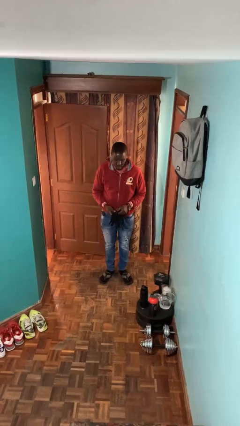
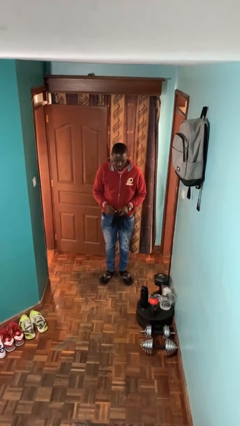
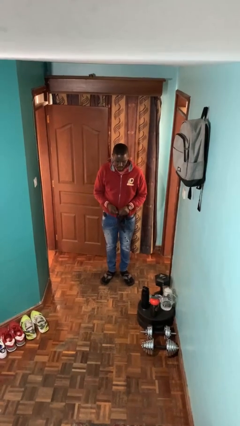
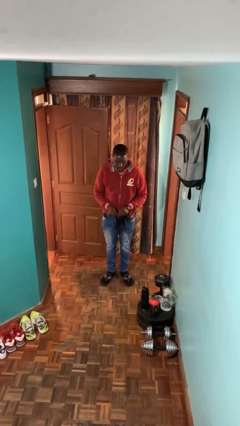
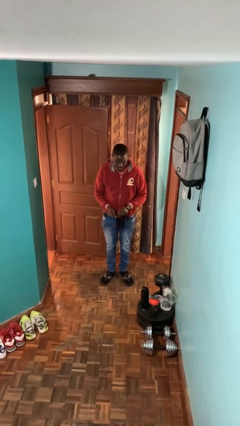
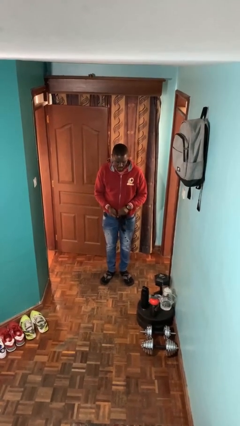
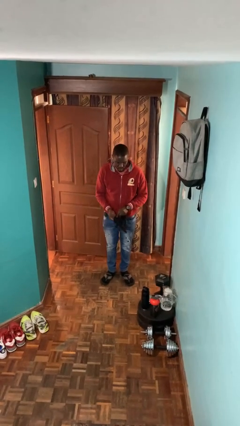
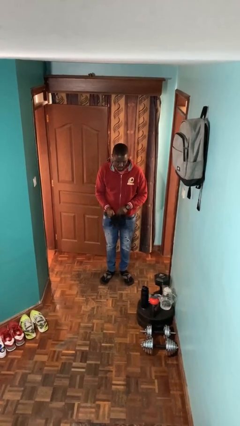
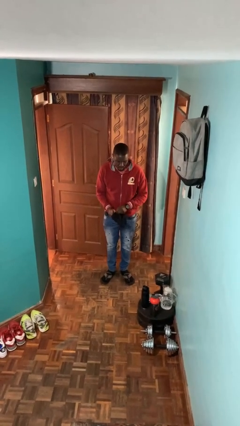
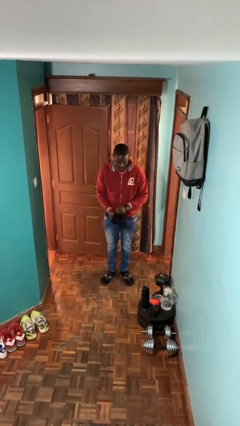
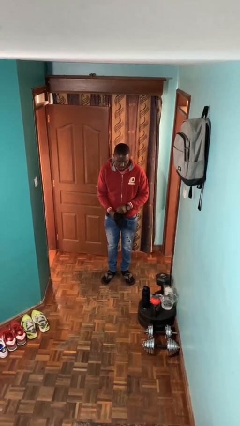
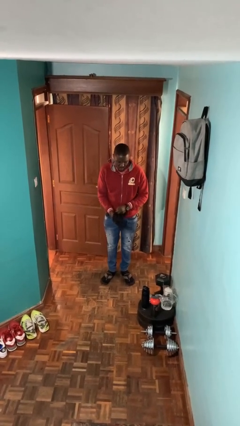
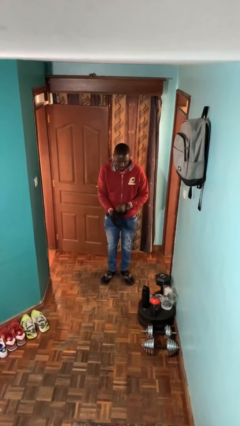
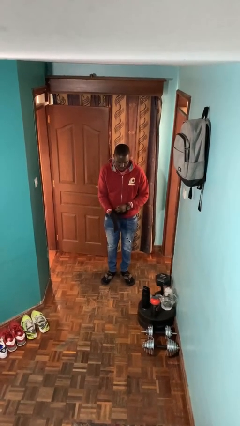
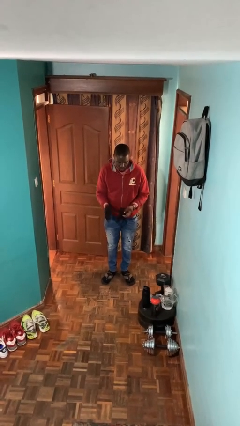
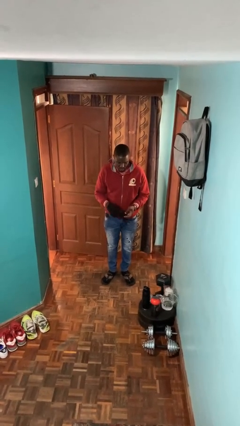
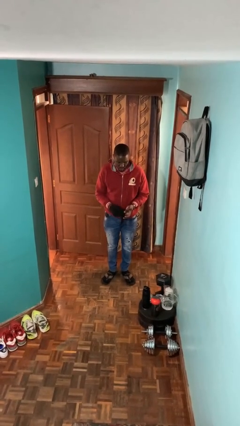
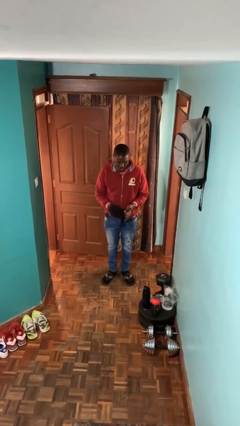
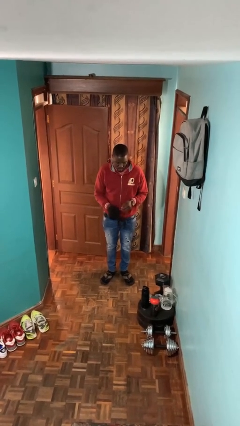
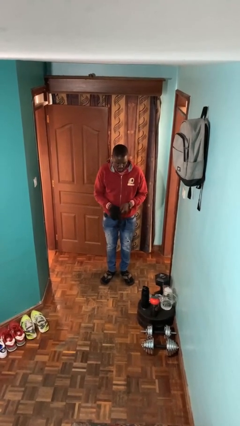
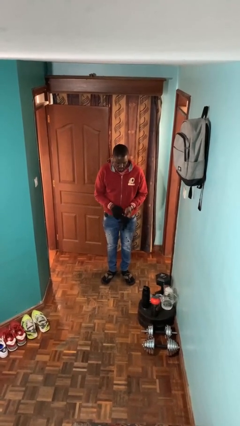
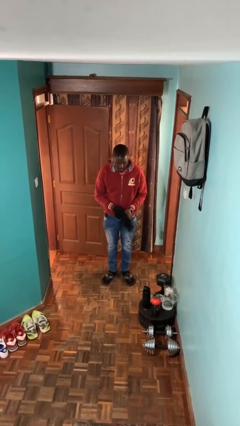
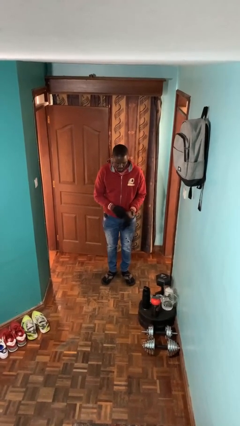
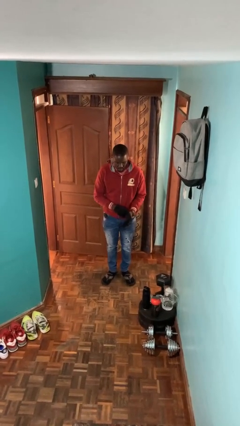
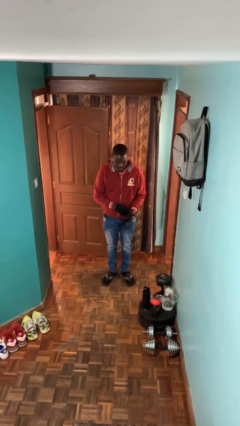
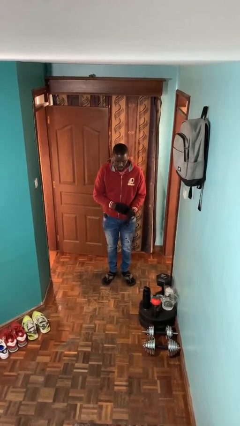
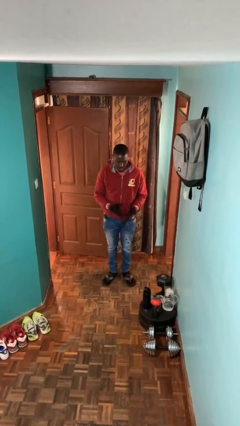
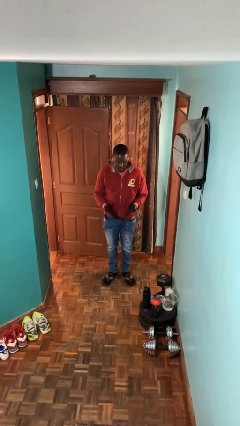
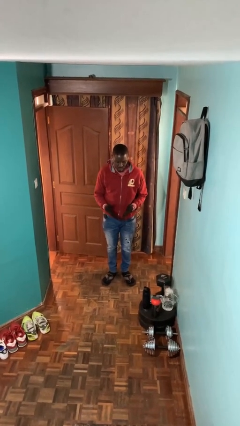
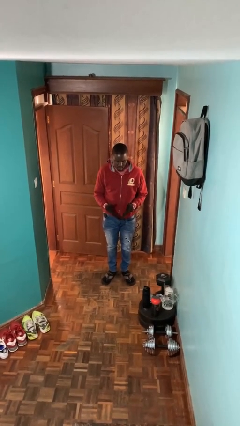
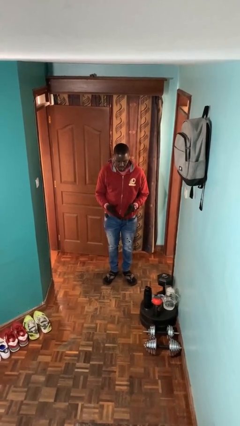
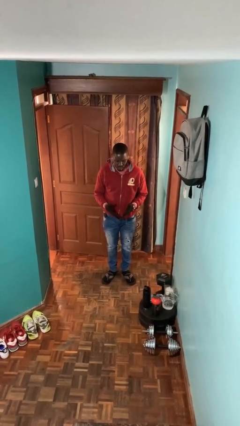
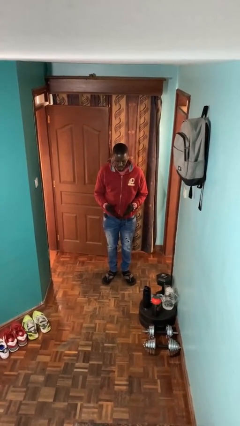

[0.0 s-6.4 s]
person puts on gloves

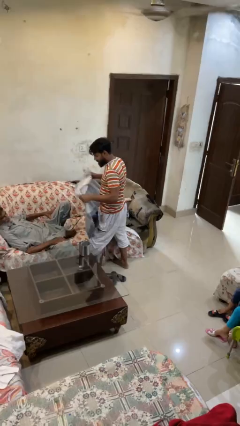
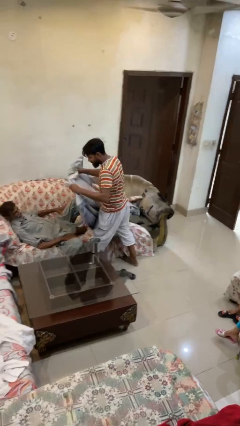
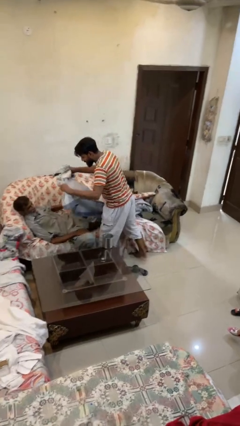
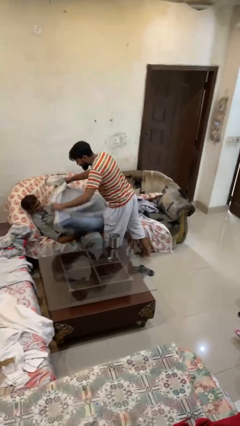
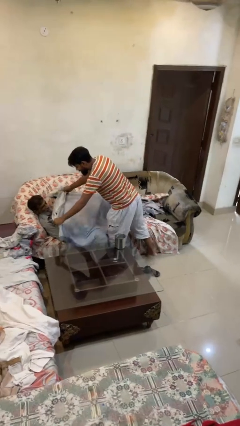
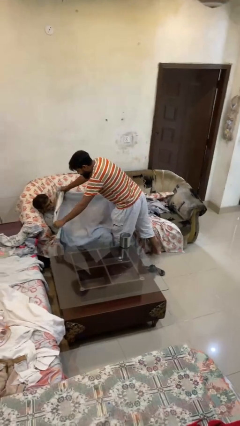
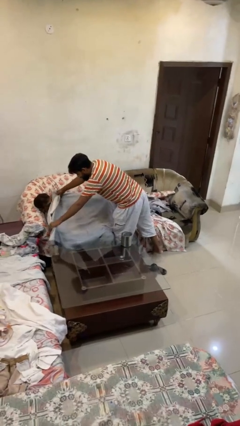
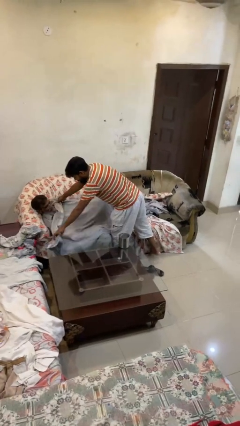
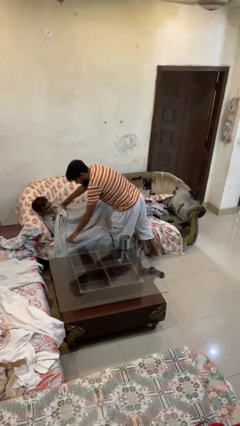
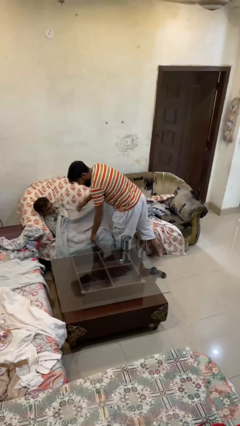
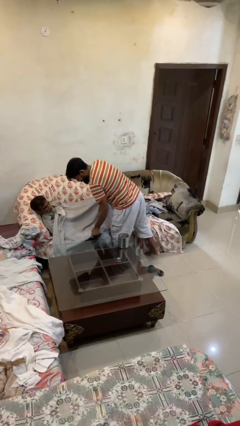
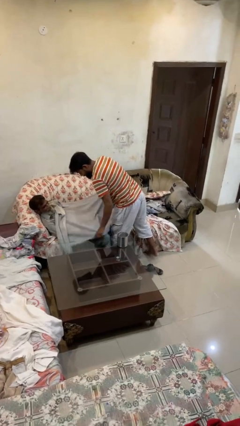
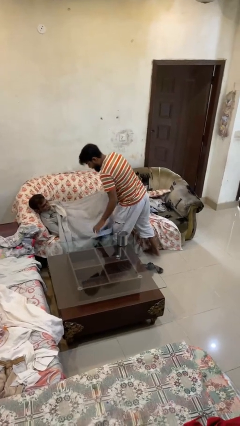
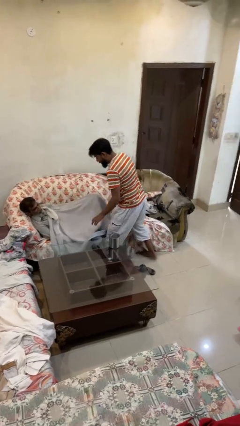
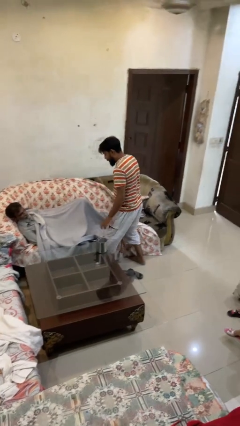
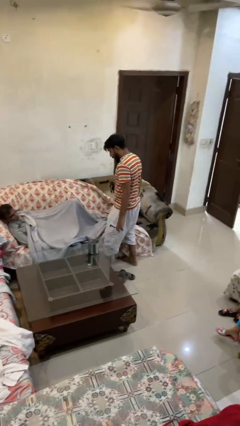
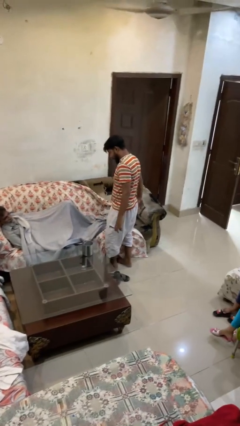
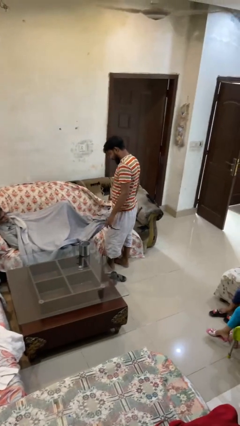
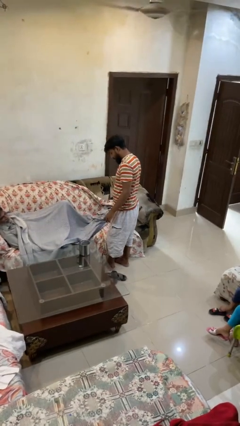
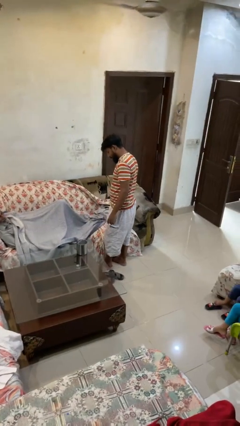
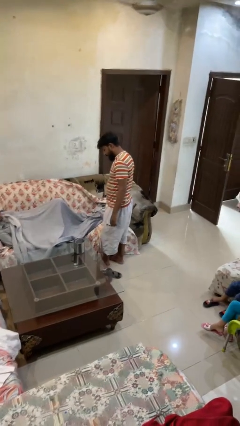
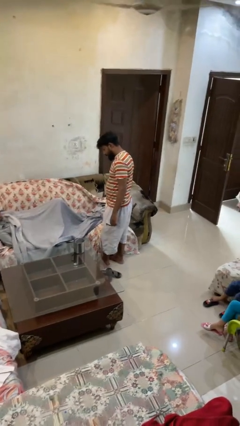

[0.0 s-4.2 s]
person covers friend with blanket

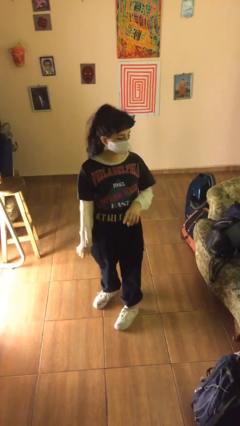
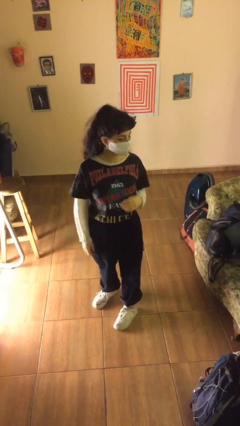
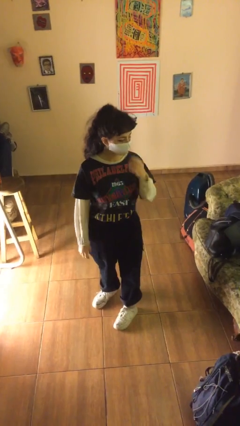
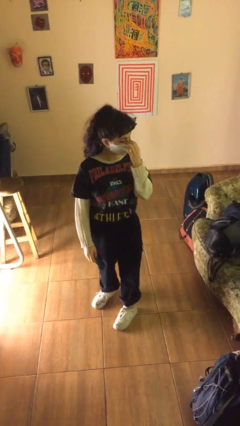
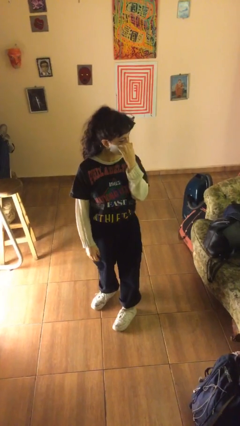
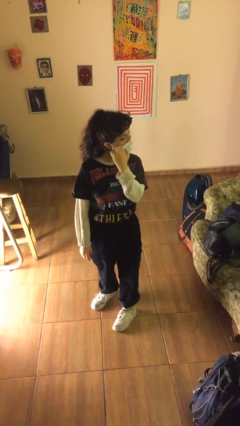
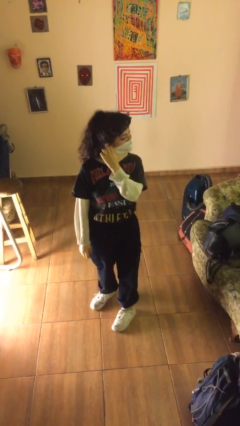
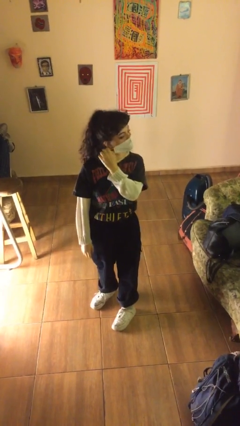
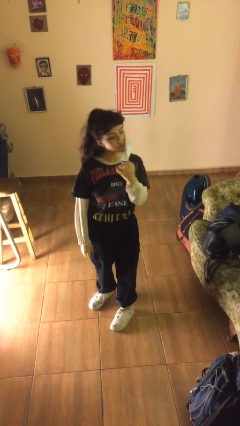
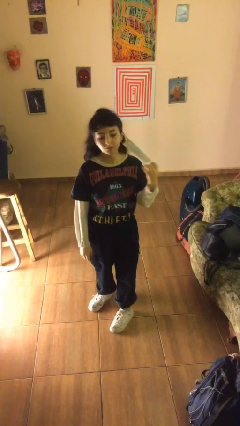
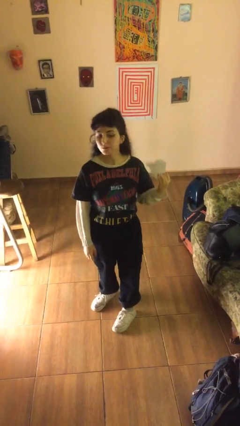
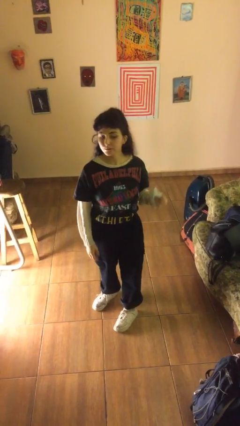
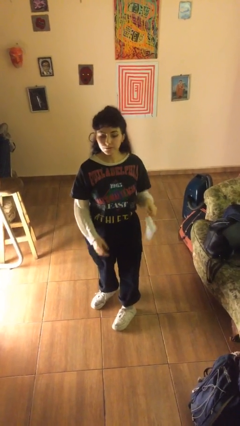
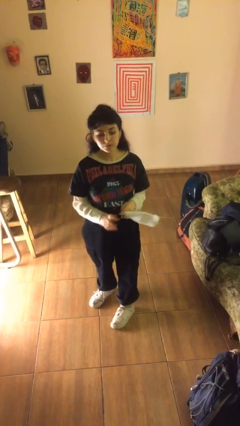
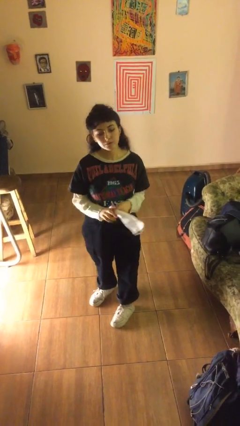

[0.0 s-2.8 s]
person takes off facemask

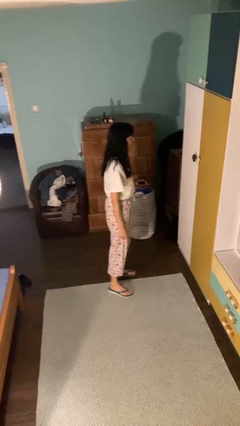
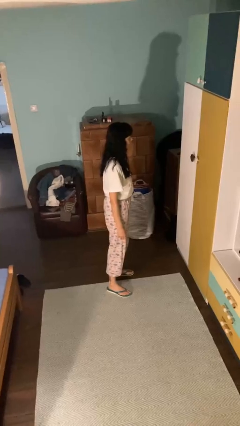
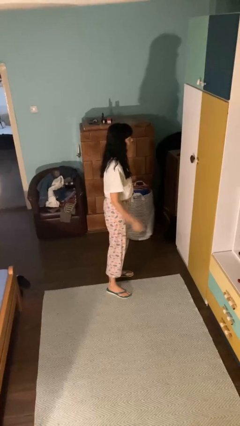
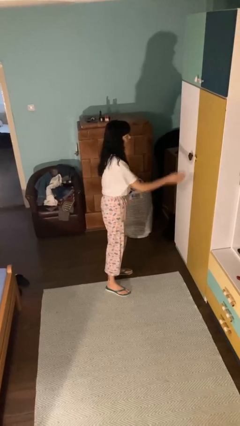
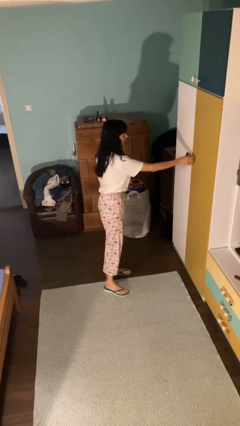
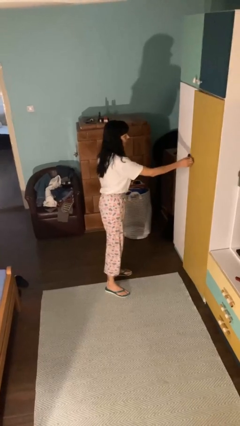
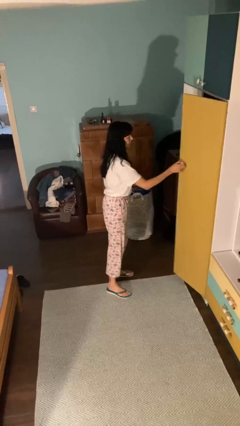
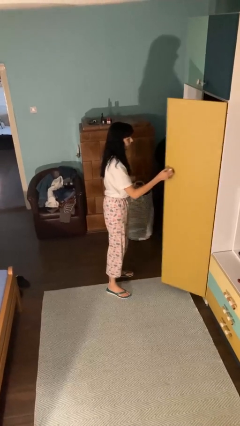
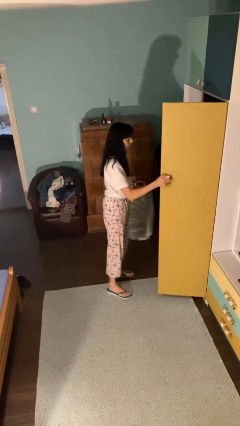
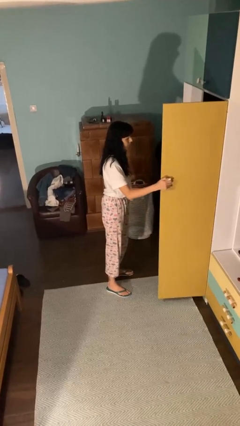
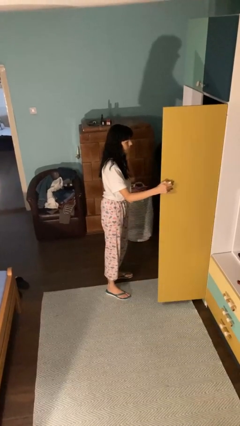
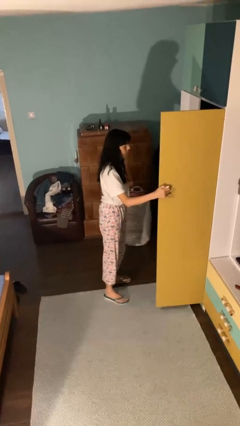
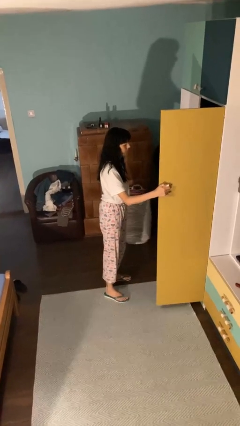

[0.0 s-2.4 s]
person opens closet door

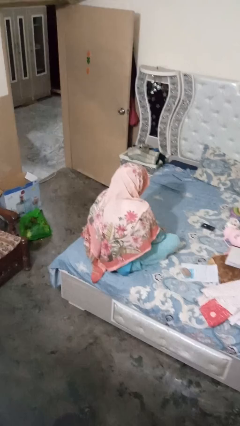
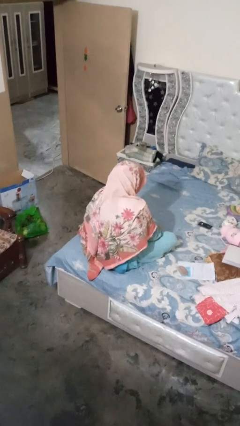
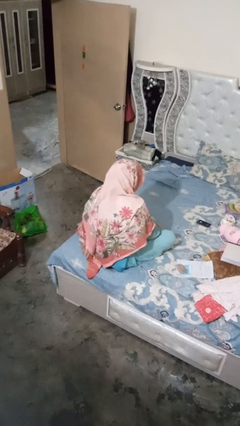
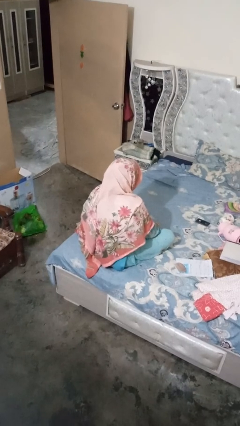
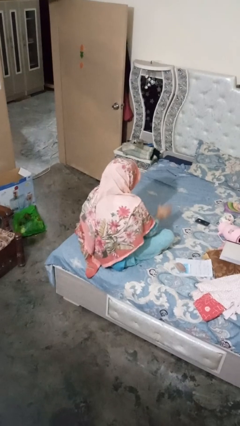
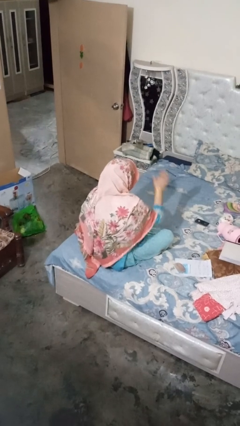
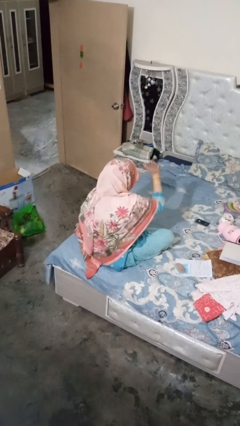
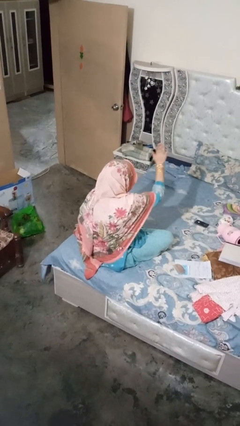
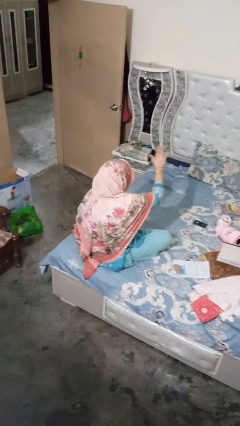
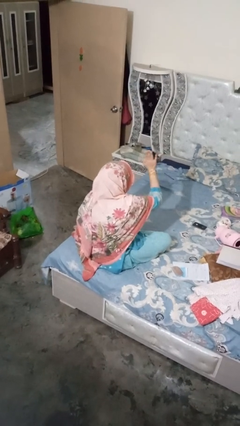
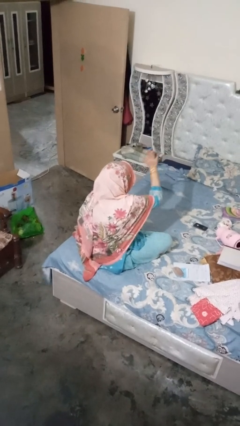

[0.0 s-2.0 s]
person gestures stop
